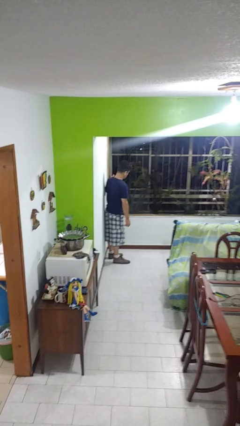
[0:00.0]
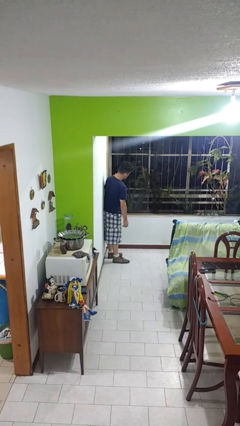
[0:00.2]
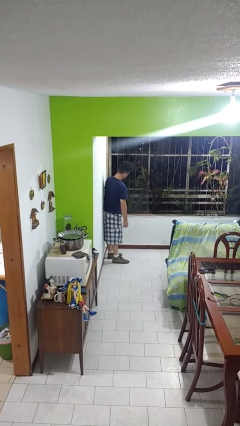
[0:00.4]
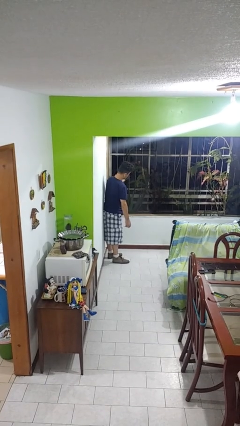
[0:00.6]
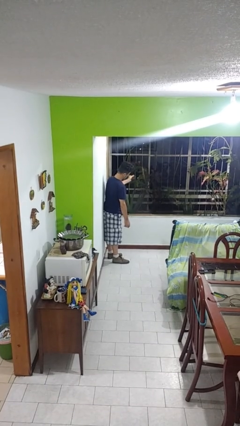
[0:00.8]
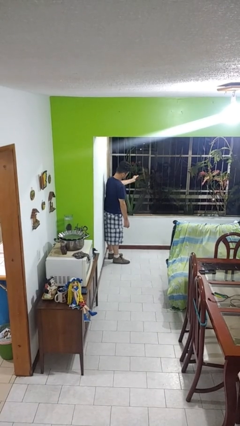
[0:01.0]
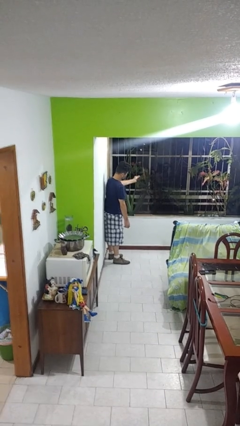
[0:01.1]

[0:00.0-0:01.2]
person opens home window

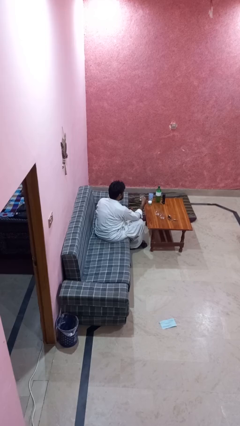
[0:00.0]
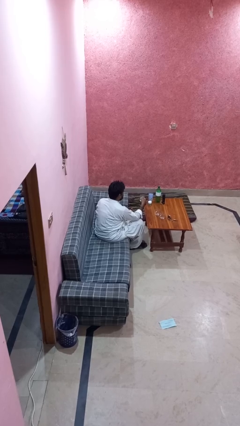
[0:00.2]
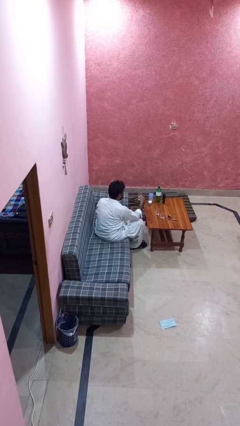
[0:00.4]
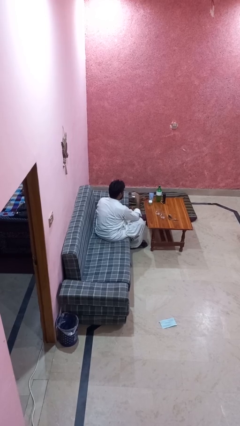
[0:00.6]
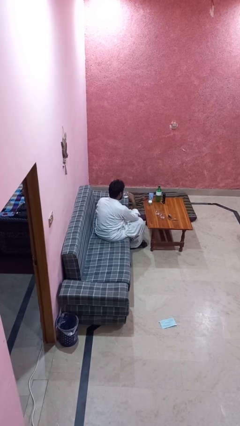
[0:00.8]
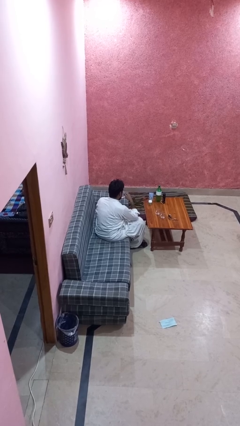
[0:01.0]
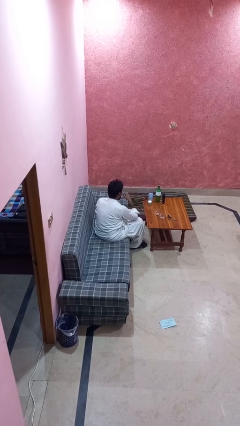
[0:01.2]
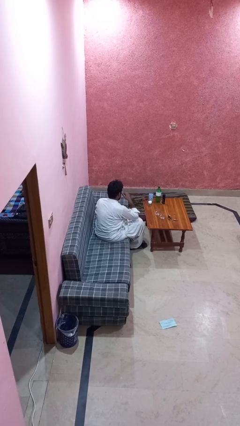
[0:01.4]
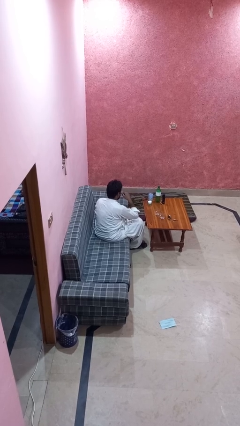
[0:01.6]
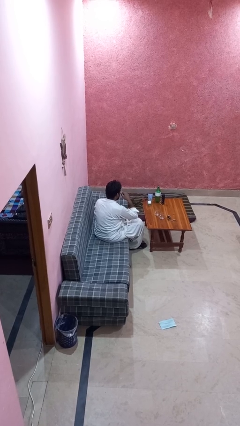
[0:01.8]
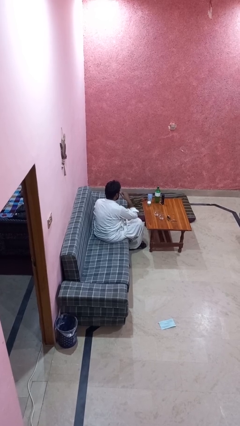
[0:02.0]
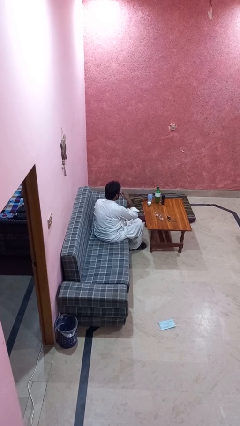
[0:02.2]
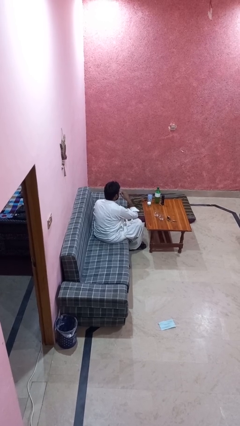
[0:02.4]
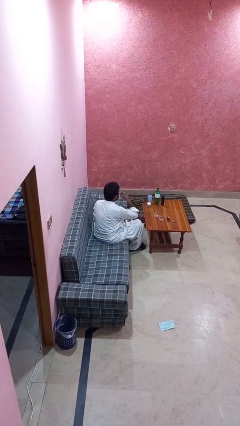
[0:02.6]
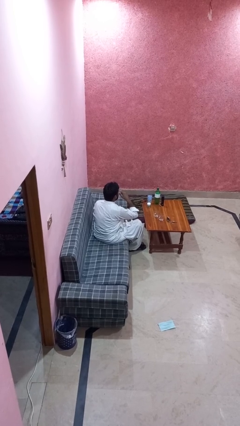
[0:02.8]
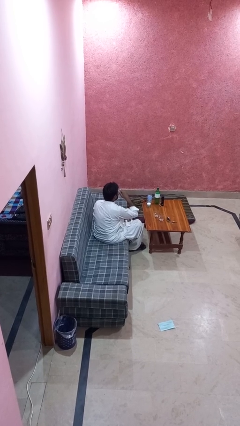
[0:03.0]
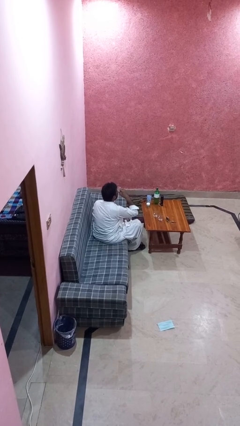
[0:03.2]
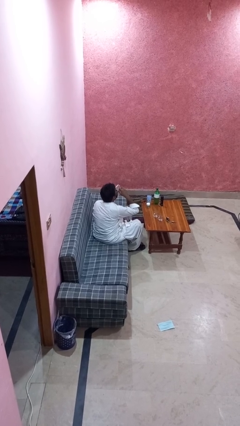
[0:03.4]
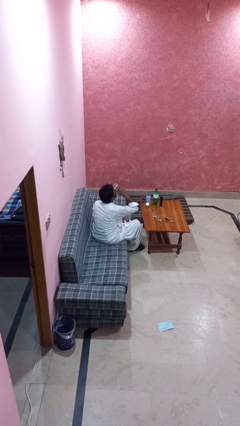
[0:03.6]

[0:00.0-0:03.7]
person drinks from shotglass

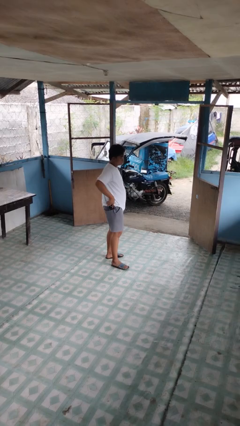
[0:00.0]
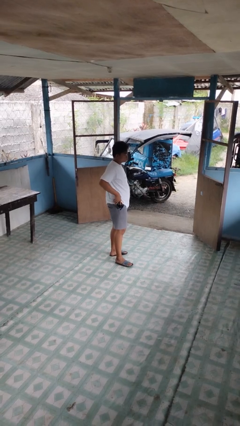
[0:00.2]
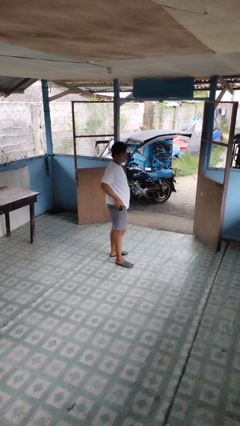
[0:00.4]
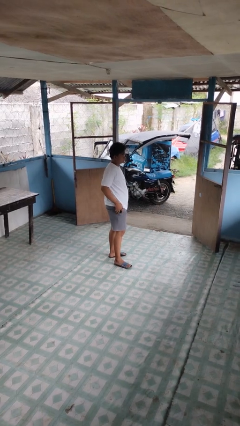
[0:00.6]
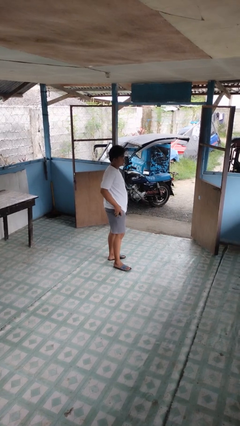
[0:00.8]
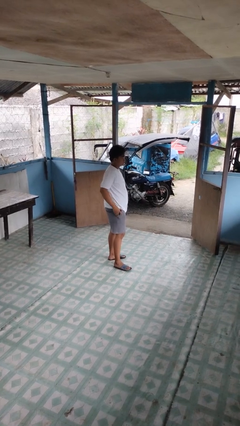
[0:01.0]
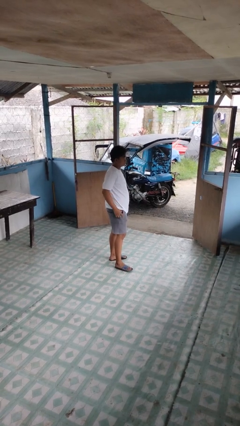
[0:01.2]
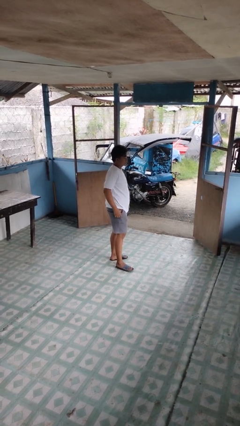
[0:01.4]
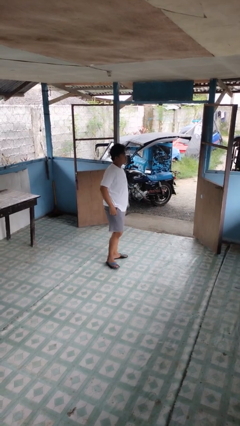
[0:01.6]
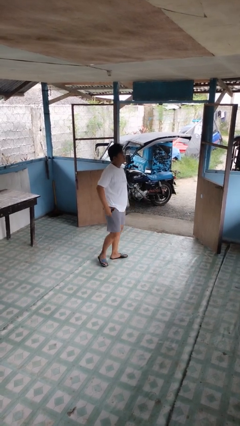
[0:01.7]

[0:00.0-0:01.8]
person puts phone into pocket

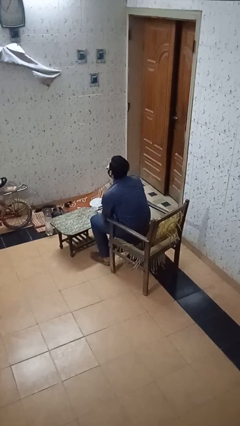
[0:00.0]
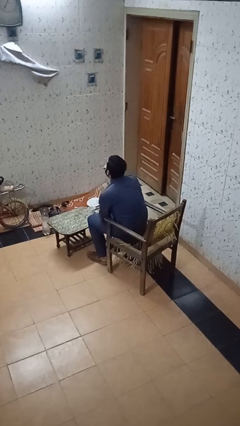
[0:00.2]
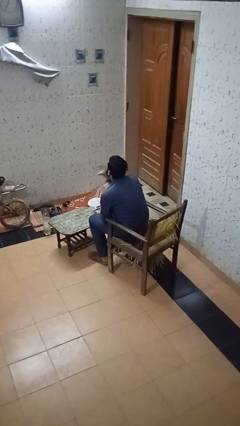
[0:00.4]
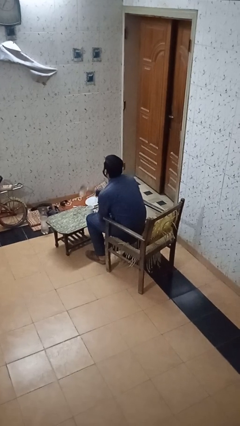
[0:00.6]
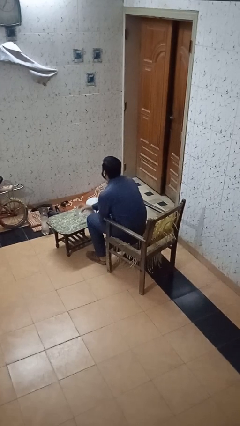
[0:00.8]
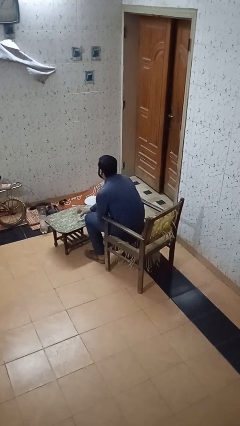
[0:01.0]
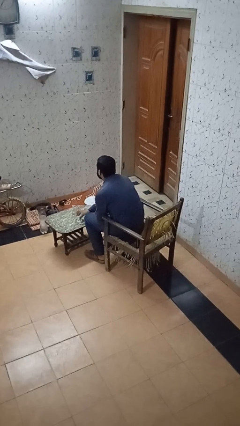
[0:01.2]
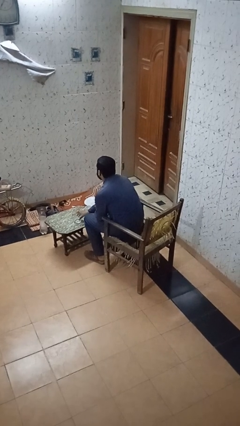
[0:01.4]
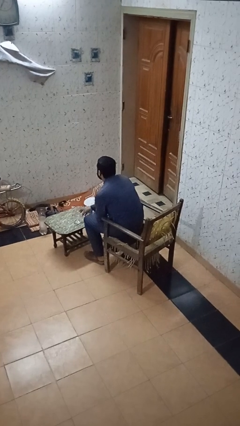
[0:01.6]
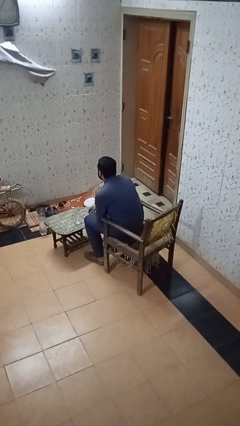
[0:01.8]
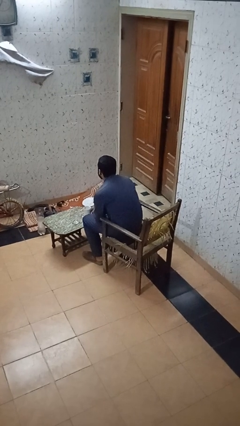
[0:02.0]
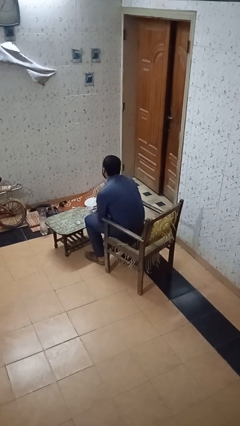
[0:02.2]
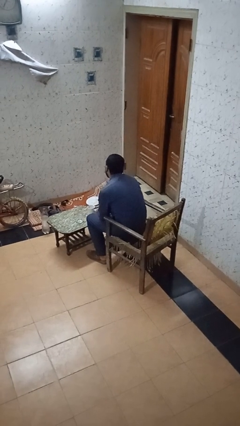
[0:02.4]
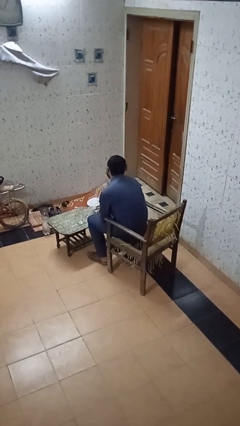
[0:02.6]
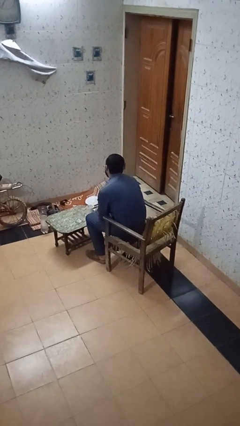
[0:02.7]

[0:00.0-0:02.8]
person puts down object on table

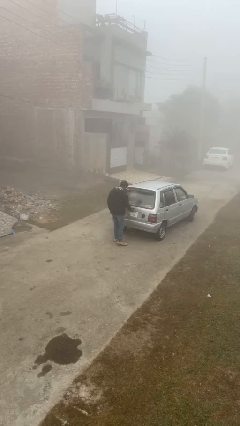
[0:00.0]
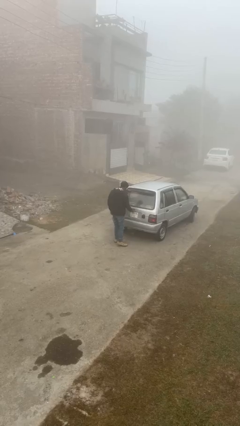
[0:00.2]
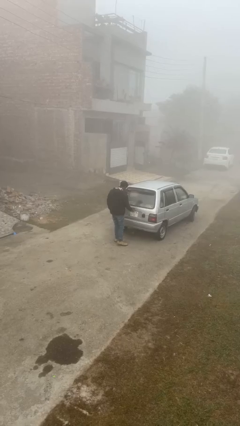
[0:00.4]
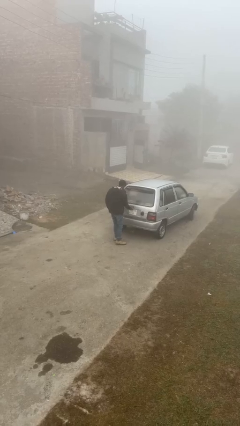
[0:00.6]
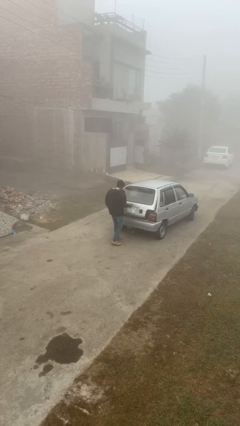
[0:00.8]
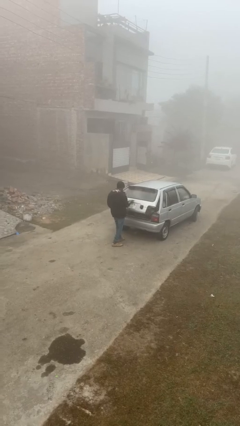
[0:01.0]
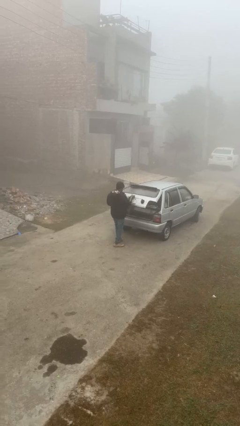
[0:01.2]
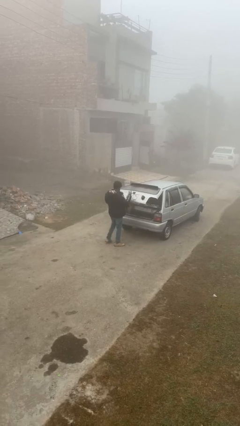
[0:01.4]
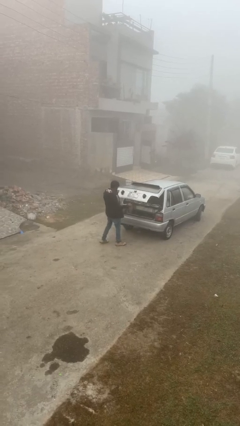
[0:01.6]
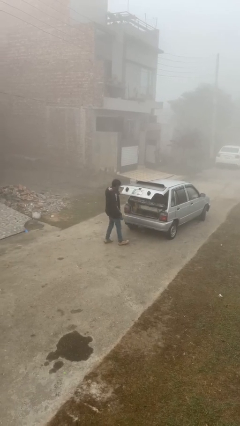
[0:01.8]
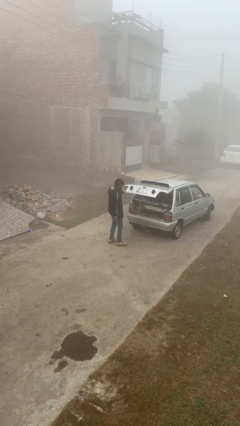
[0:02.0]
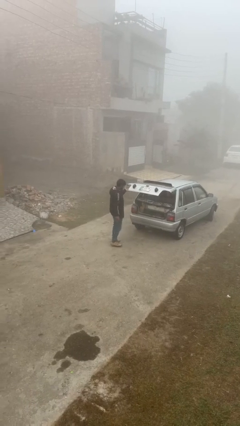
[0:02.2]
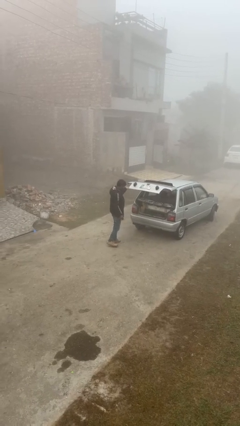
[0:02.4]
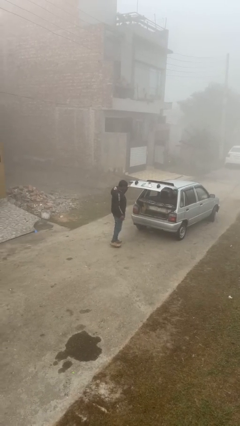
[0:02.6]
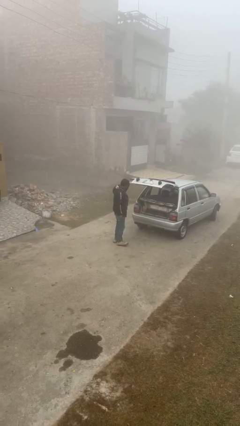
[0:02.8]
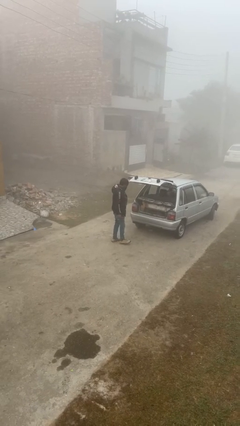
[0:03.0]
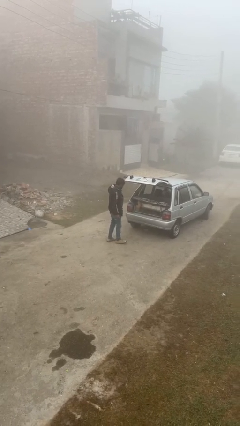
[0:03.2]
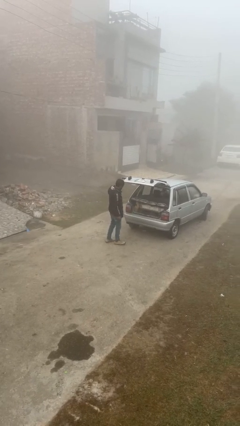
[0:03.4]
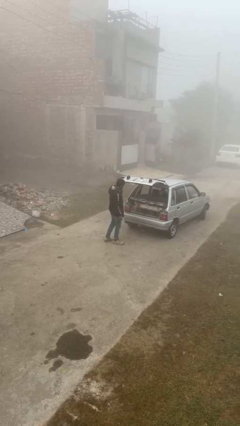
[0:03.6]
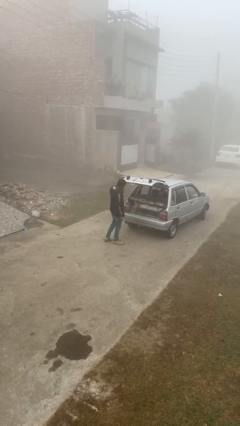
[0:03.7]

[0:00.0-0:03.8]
person opens car trunk

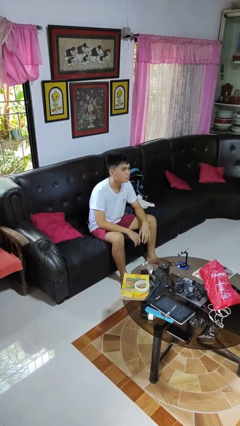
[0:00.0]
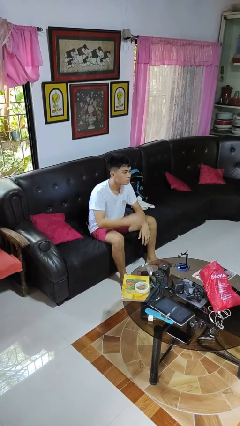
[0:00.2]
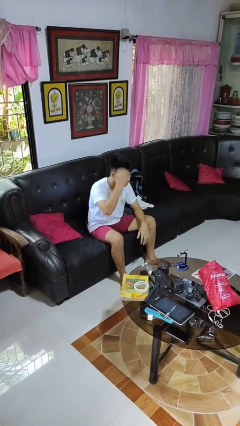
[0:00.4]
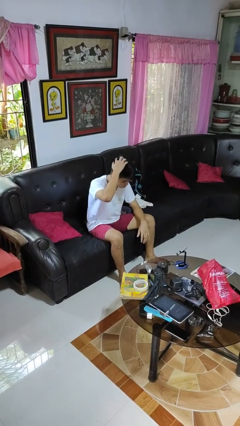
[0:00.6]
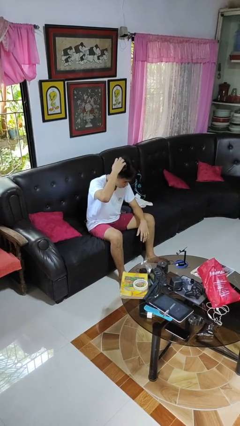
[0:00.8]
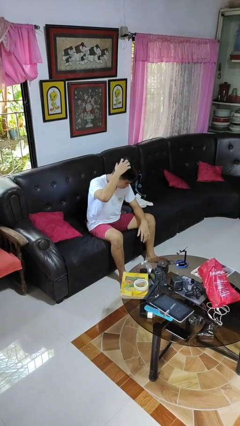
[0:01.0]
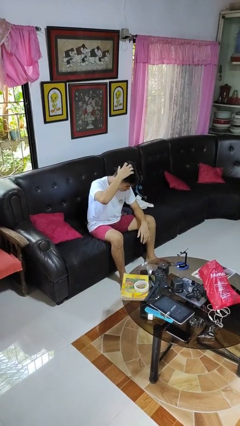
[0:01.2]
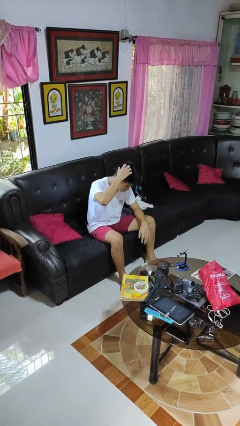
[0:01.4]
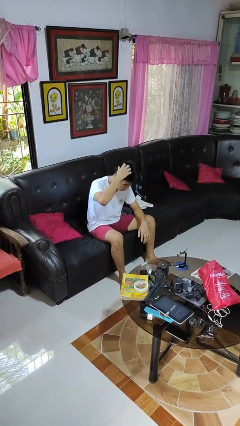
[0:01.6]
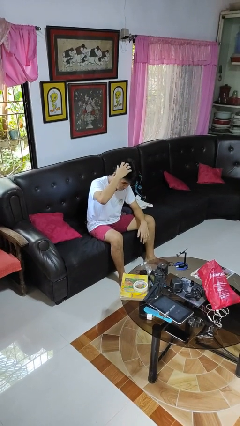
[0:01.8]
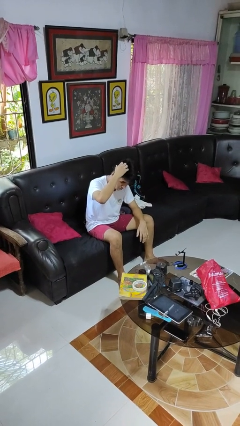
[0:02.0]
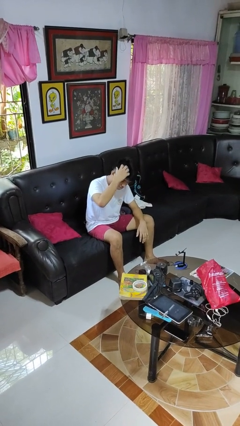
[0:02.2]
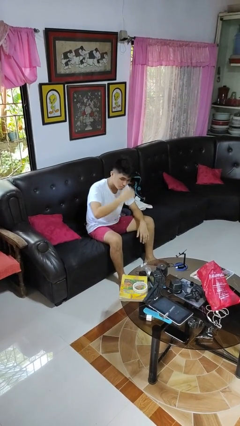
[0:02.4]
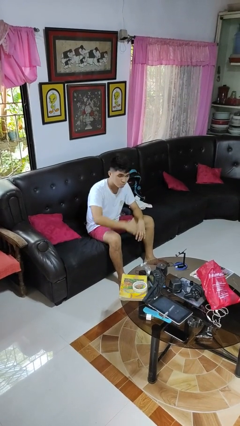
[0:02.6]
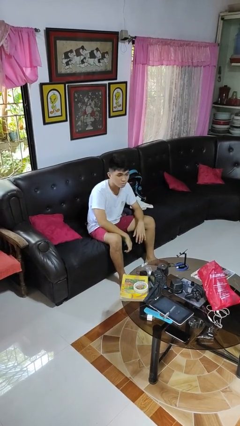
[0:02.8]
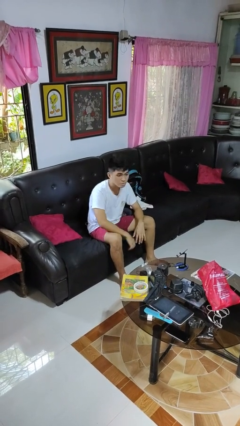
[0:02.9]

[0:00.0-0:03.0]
person scratches face

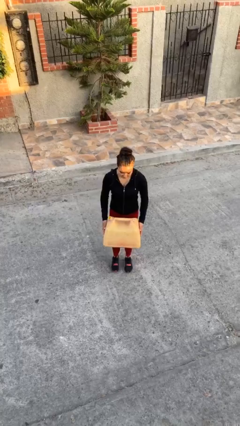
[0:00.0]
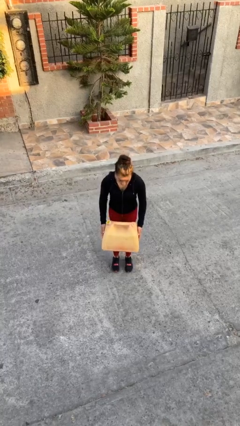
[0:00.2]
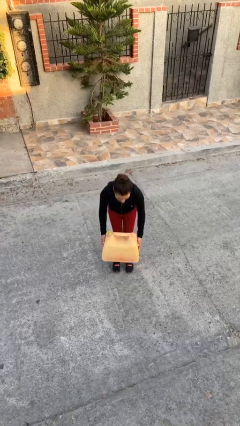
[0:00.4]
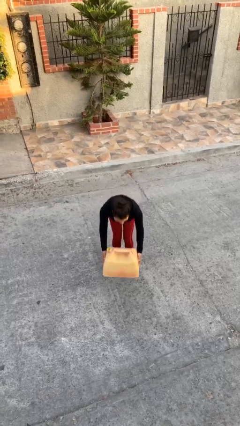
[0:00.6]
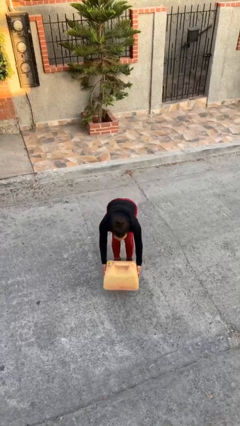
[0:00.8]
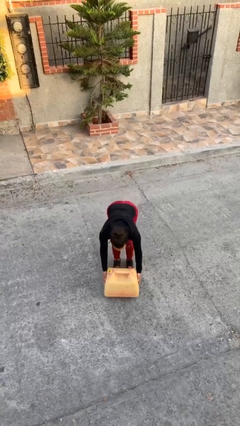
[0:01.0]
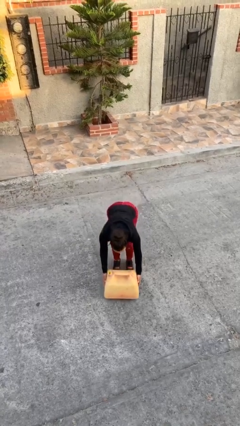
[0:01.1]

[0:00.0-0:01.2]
person puts down object on floor
